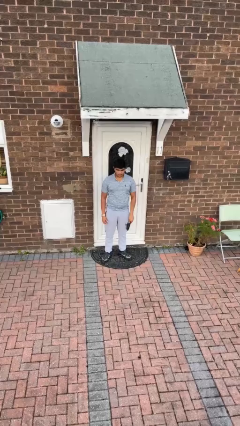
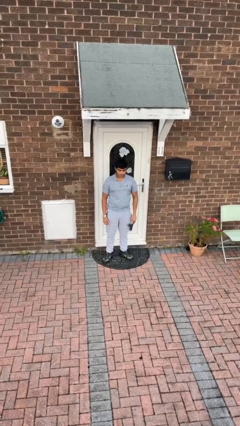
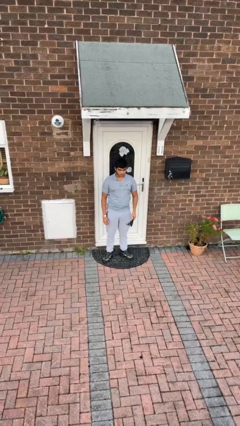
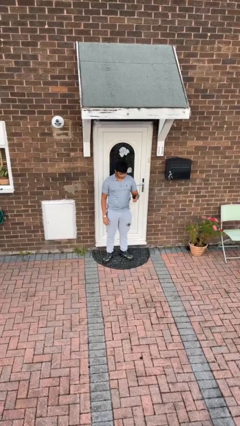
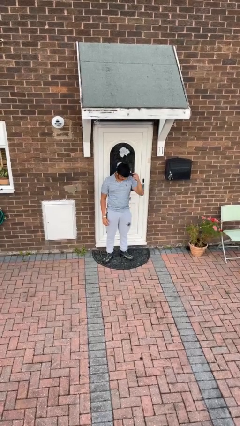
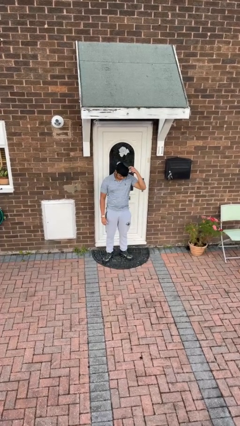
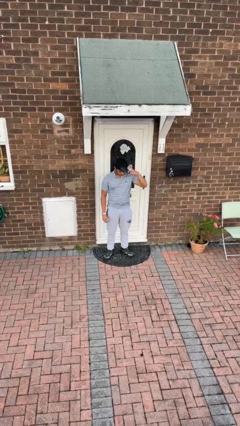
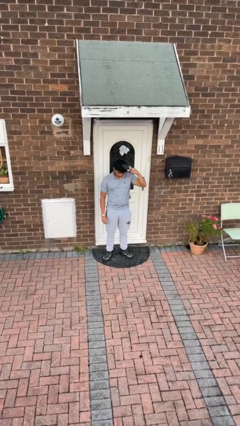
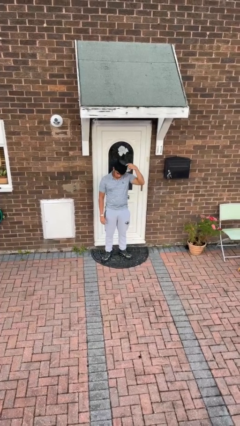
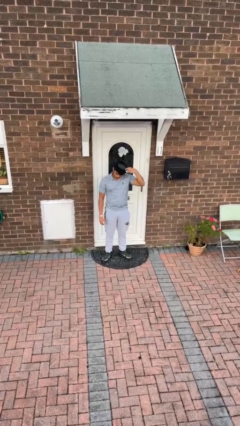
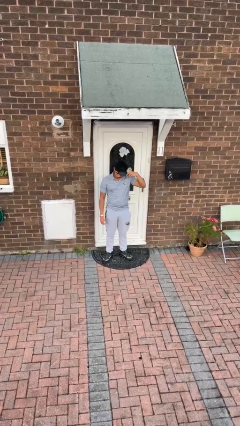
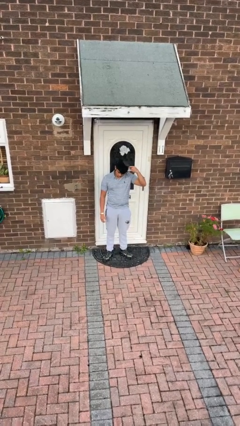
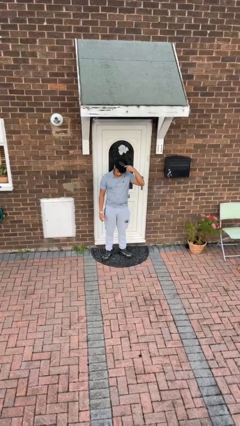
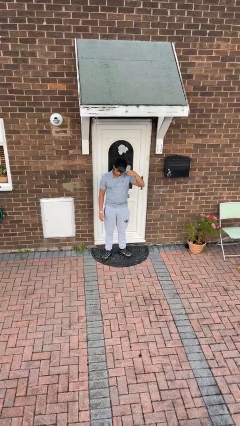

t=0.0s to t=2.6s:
person brushes hair

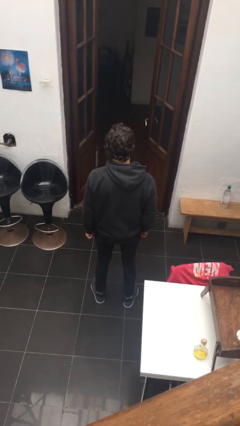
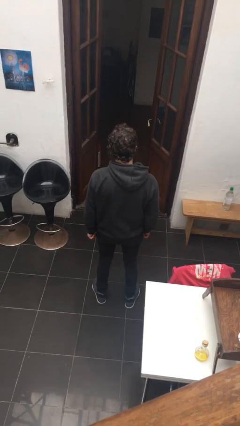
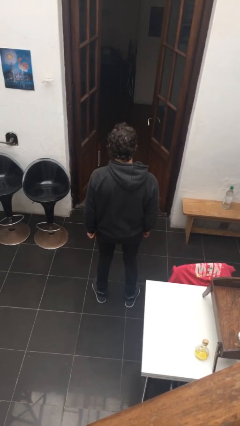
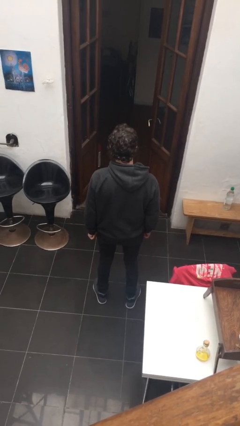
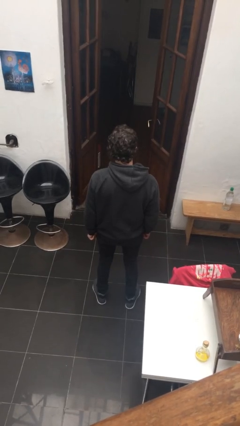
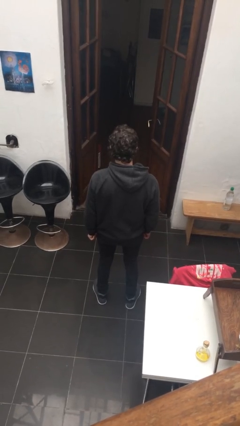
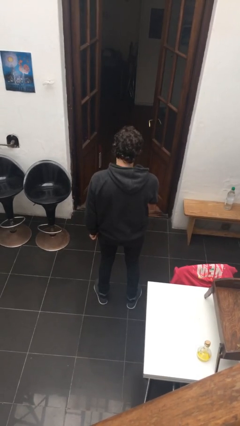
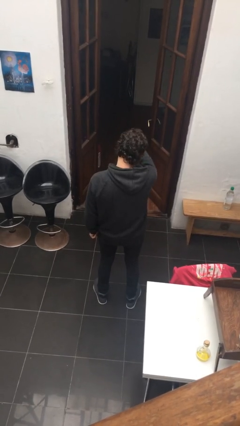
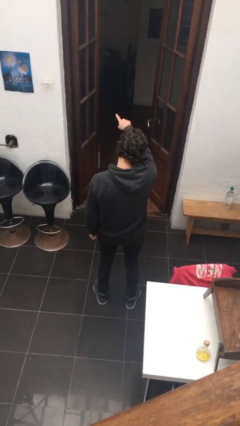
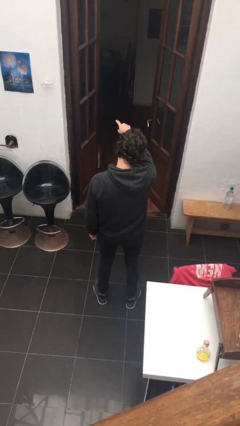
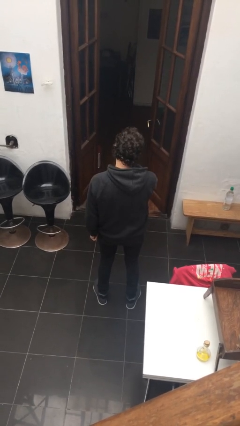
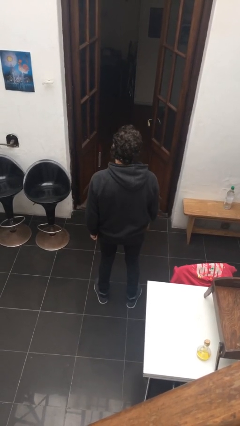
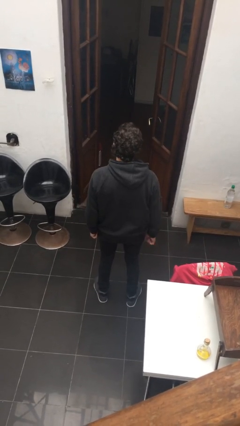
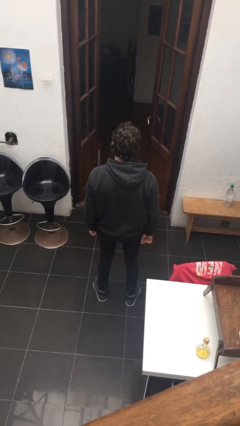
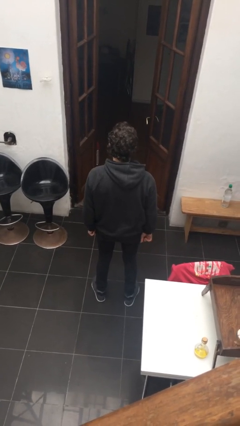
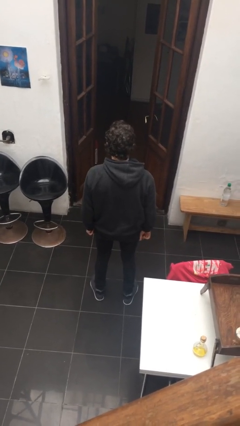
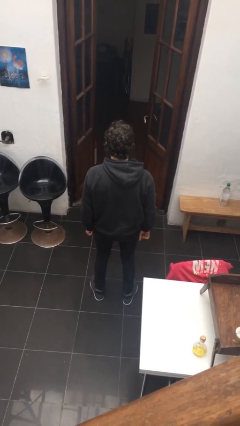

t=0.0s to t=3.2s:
person points at person

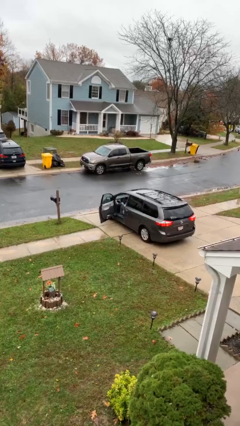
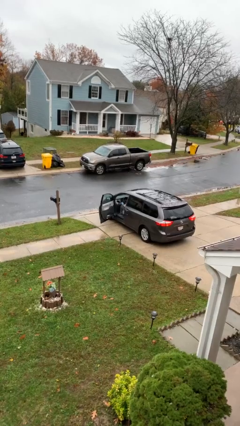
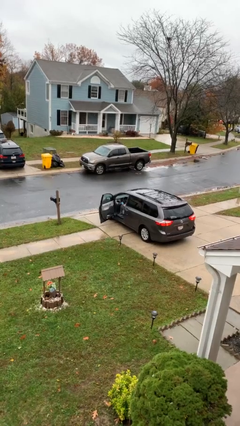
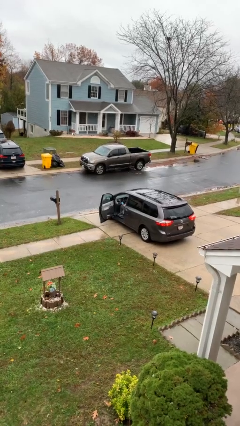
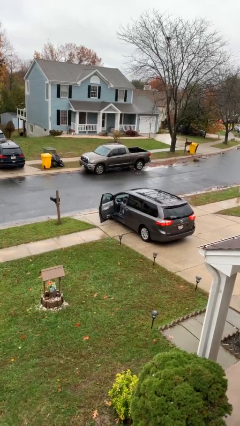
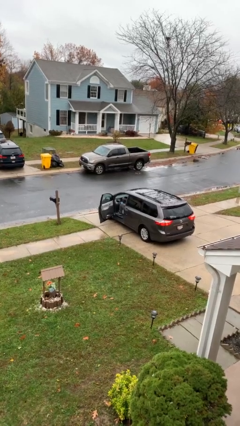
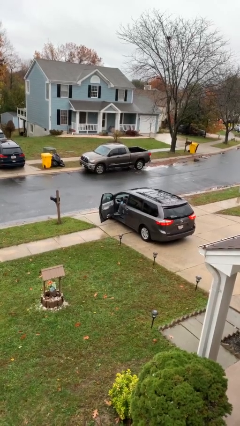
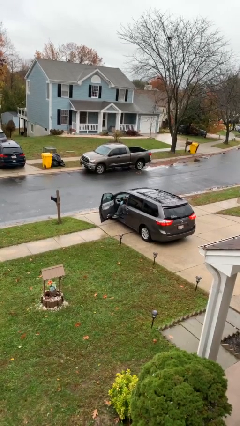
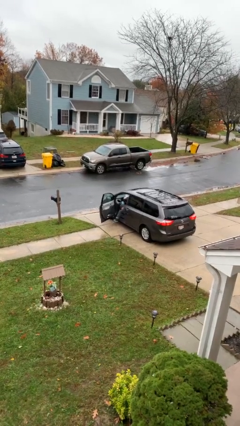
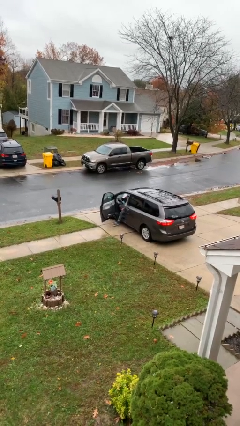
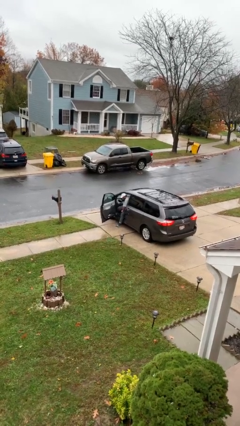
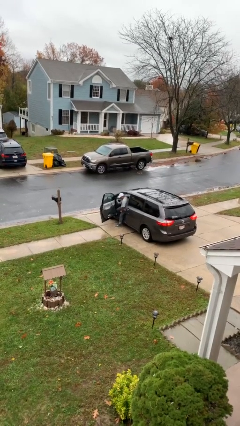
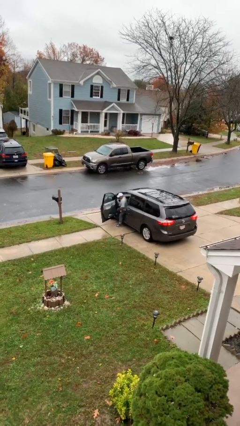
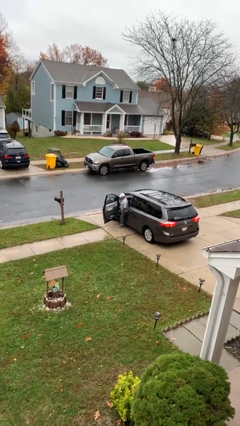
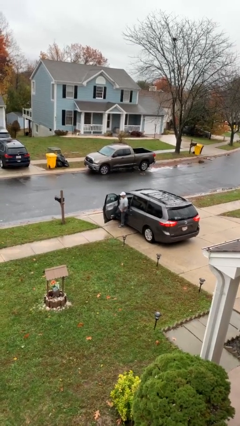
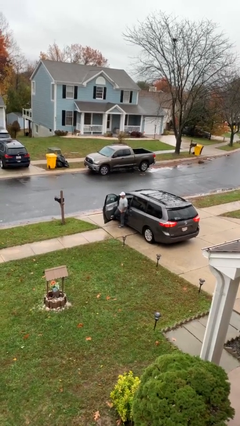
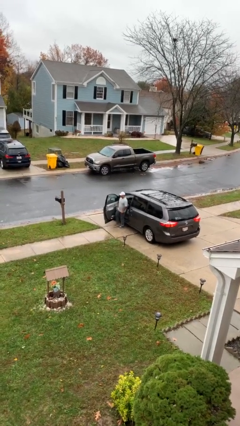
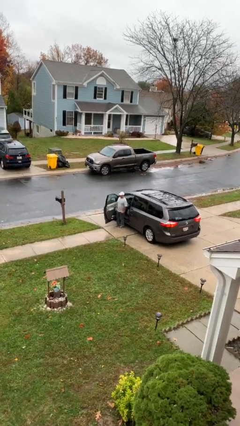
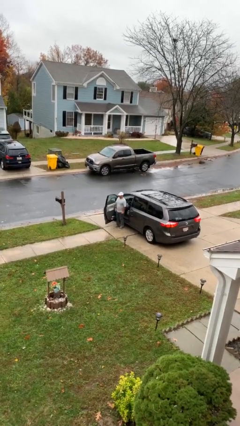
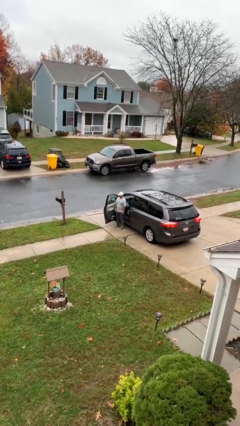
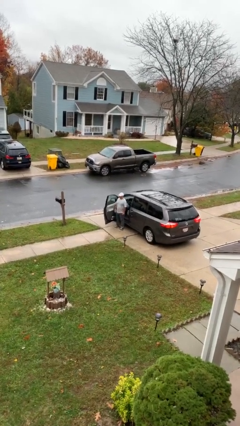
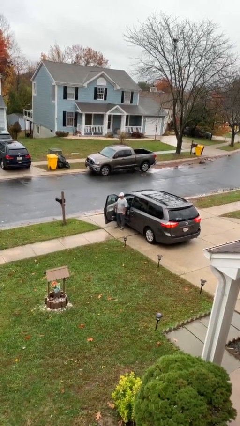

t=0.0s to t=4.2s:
person exits car

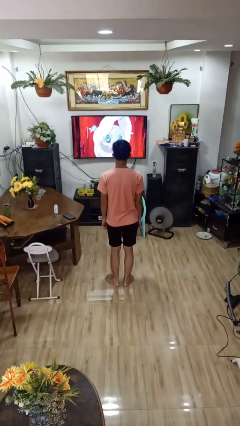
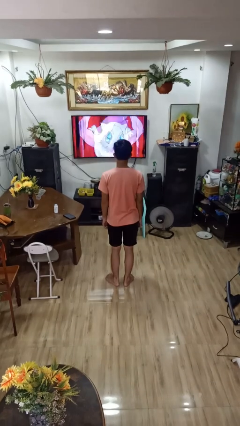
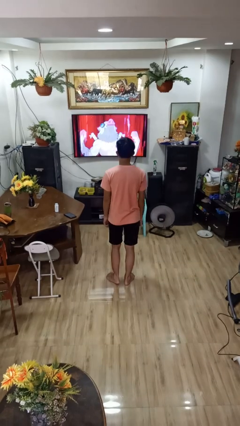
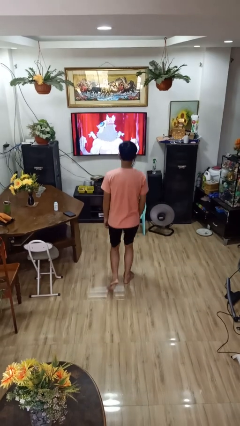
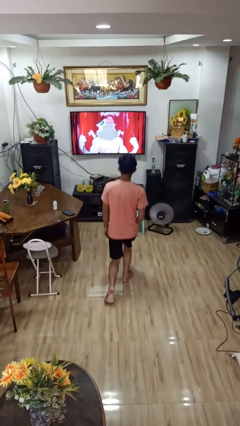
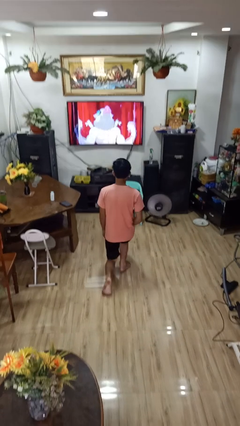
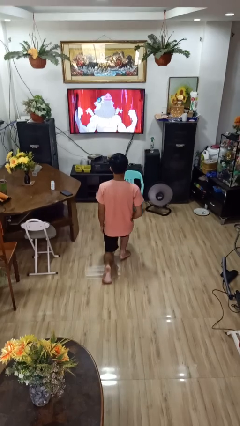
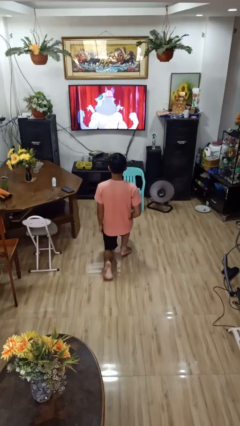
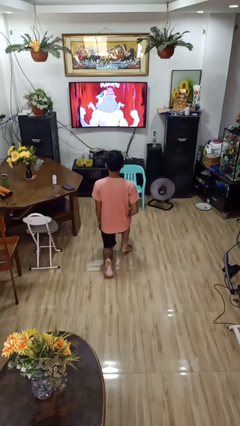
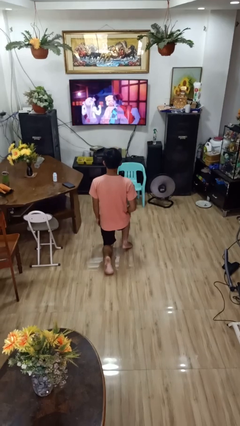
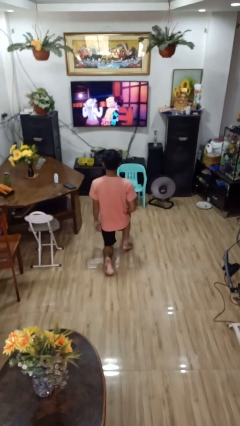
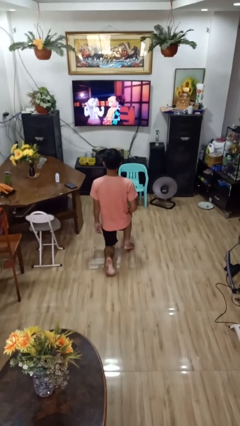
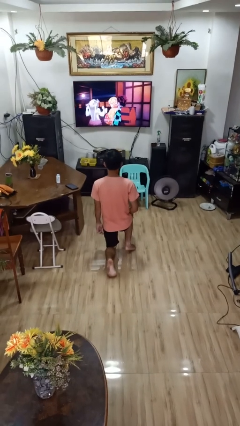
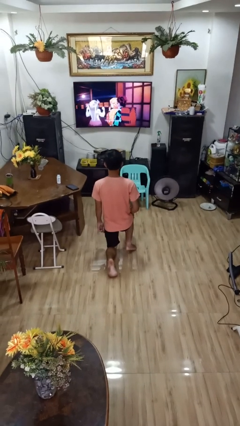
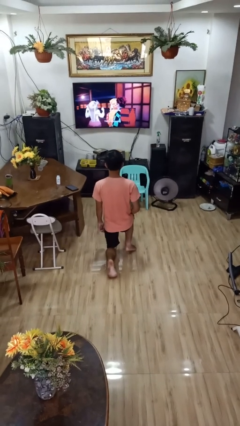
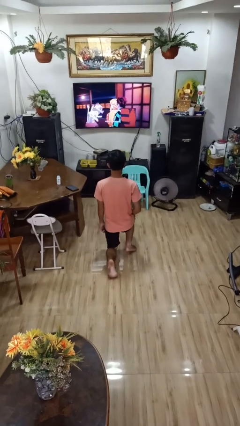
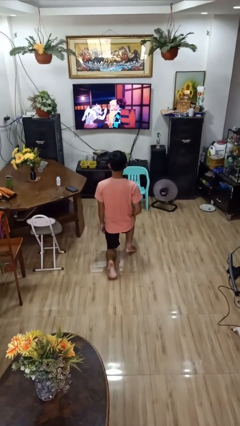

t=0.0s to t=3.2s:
person kneels

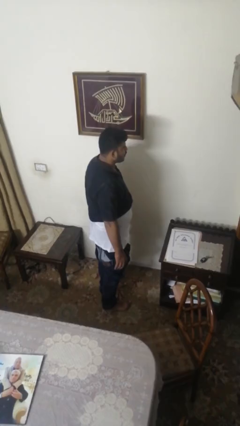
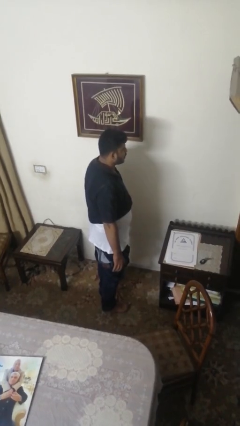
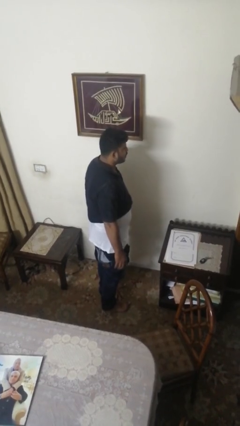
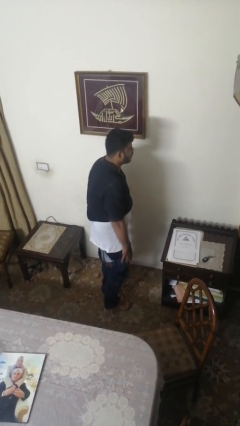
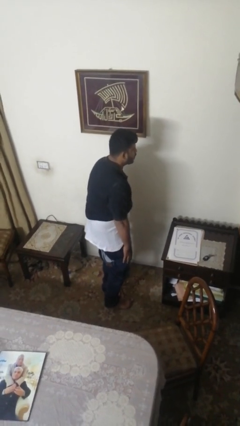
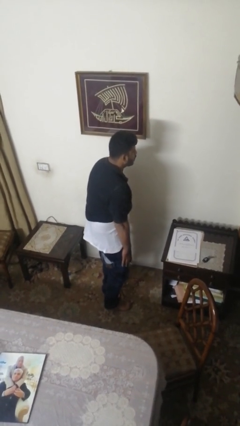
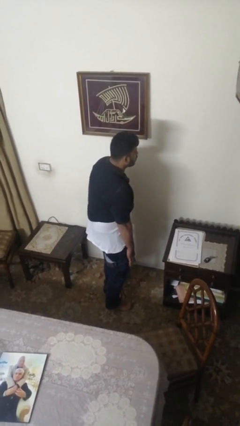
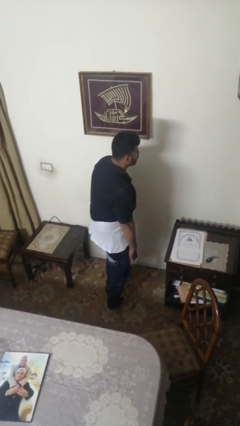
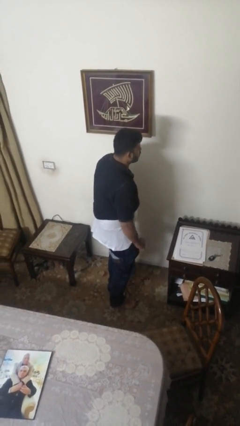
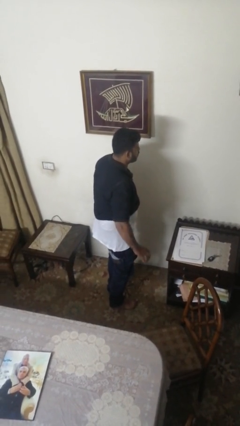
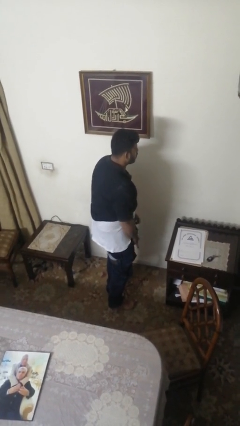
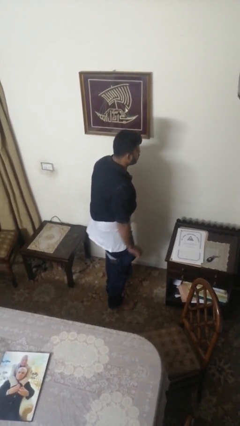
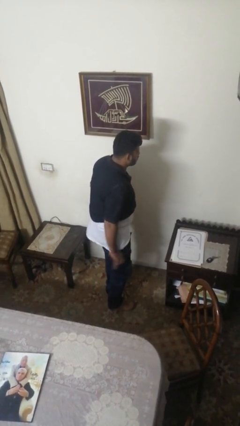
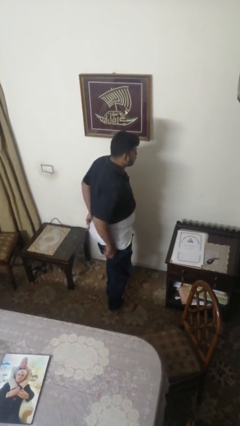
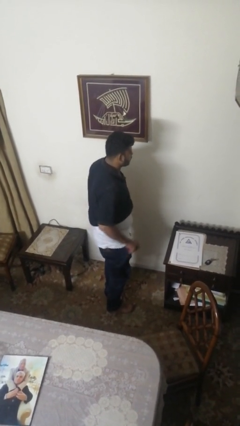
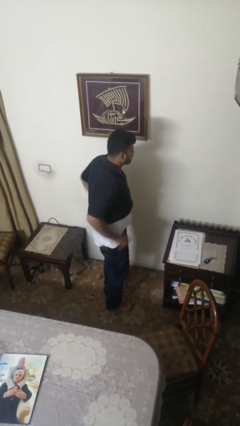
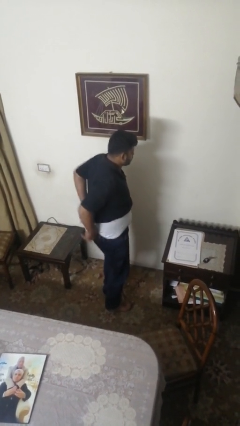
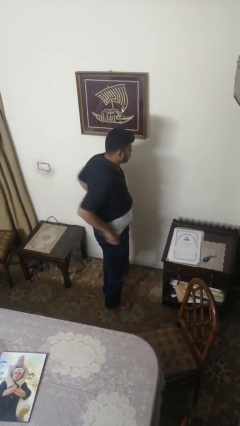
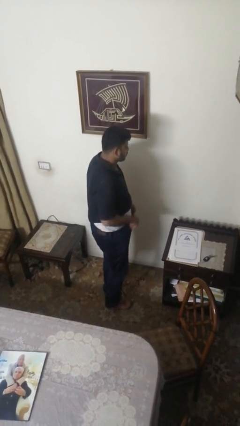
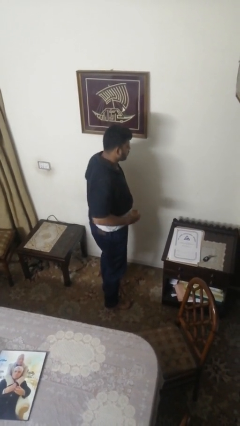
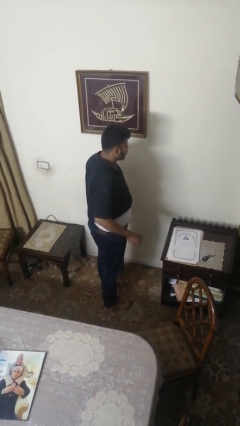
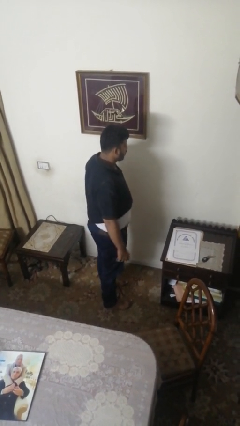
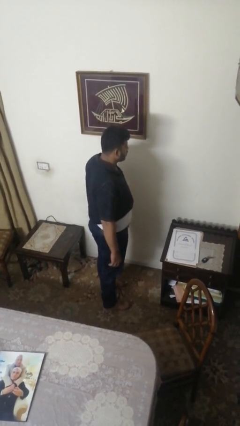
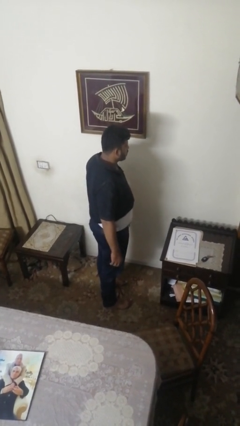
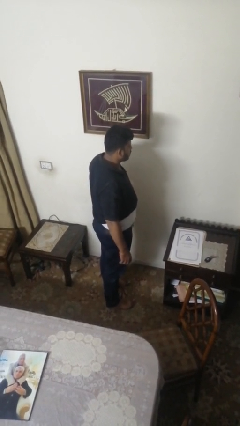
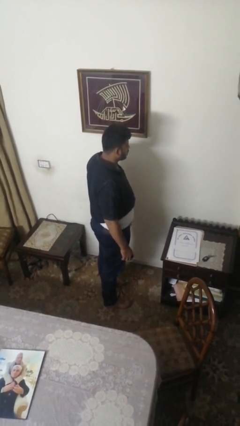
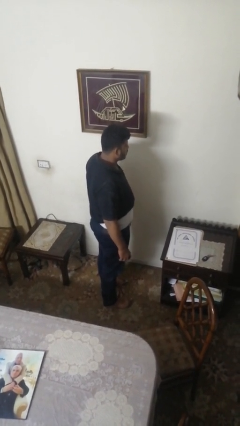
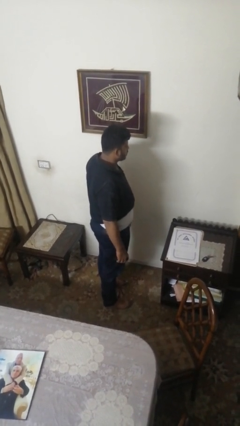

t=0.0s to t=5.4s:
person puts on pants
